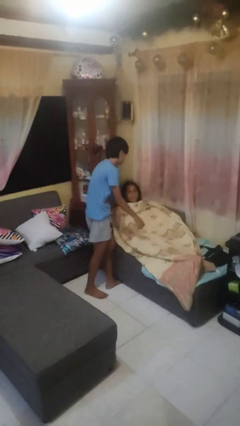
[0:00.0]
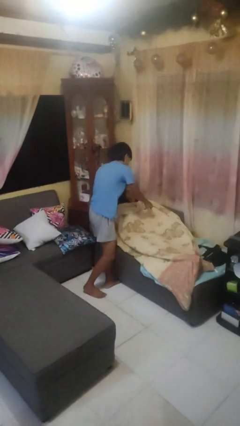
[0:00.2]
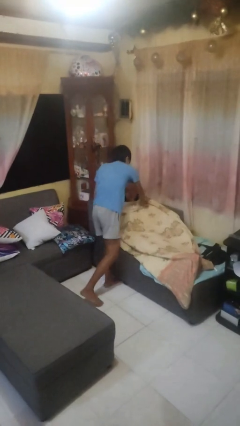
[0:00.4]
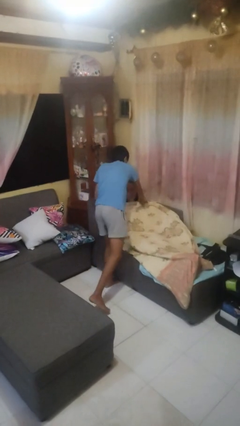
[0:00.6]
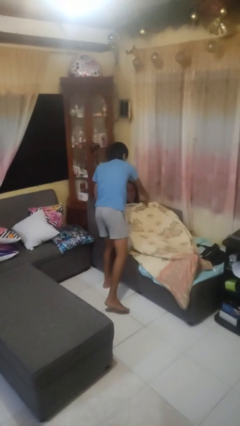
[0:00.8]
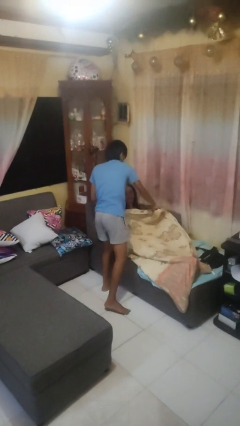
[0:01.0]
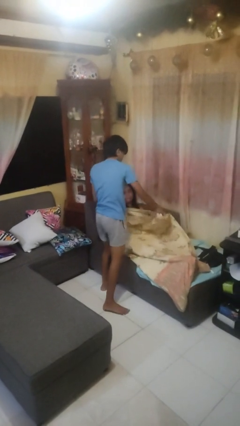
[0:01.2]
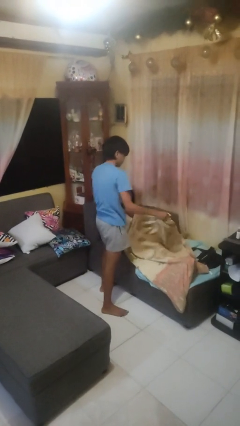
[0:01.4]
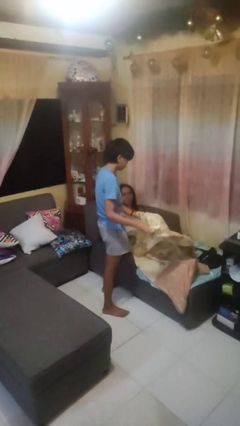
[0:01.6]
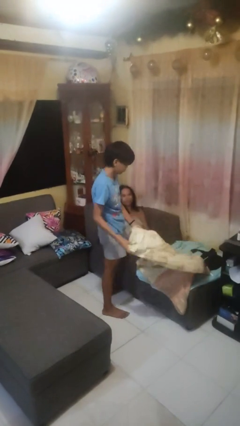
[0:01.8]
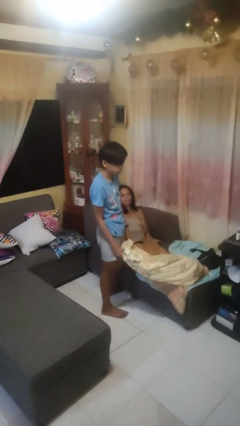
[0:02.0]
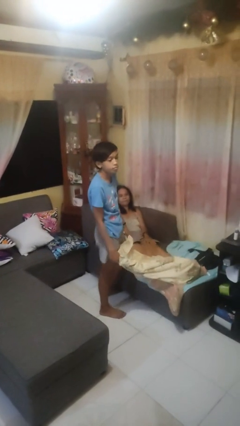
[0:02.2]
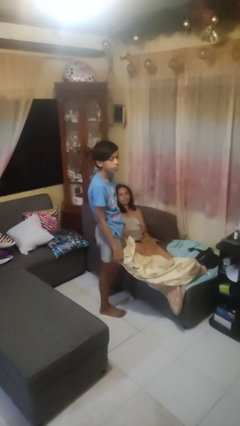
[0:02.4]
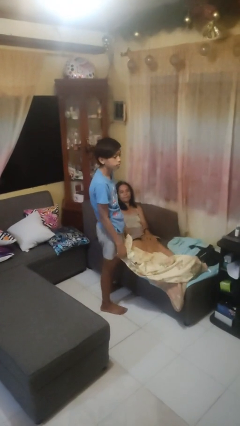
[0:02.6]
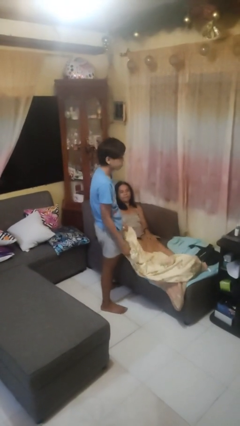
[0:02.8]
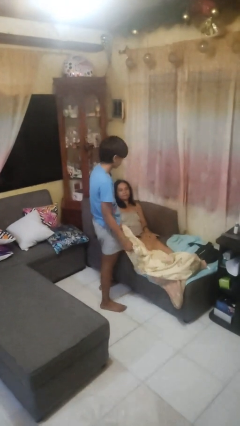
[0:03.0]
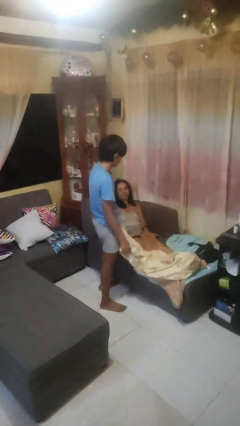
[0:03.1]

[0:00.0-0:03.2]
person uncovers friend with blanket

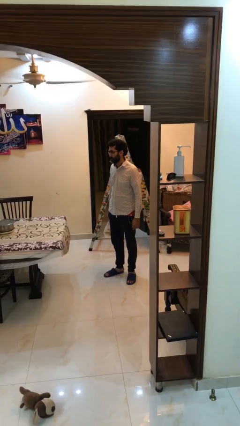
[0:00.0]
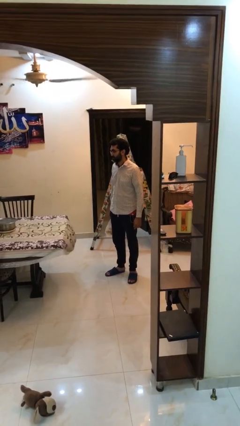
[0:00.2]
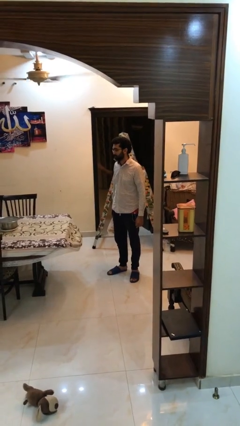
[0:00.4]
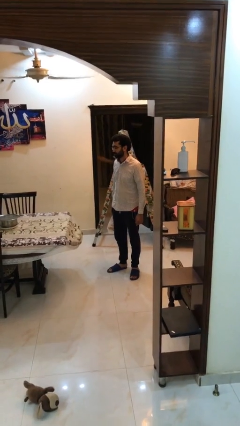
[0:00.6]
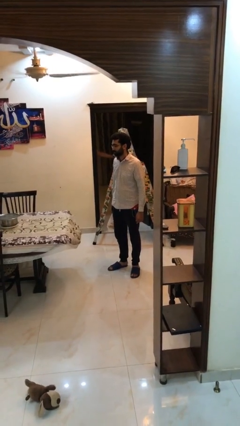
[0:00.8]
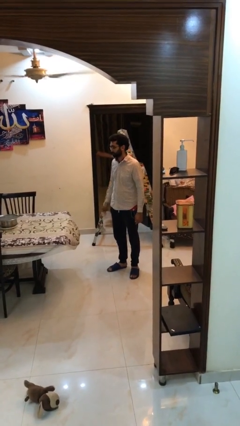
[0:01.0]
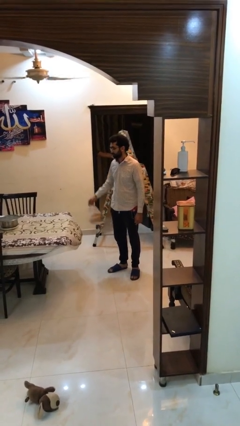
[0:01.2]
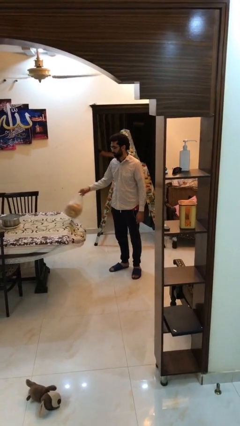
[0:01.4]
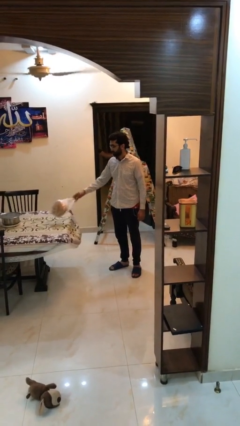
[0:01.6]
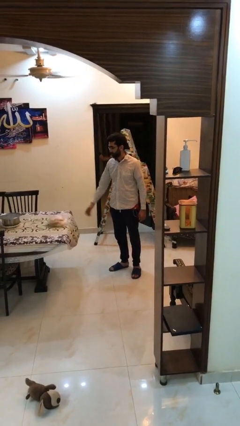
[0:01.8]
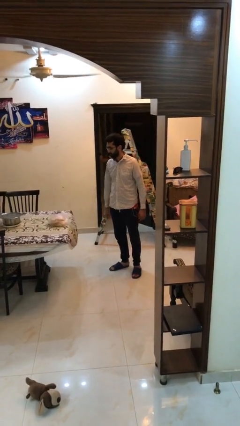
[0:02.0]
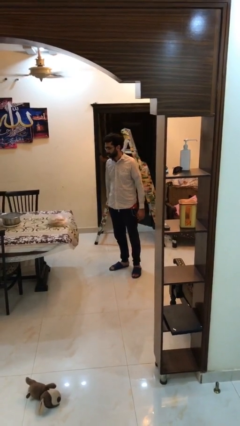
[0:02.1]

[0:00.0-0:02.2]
person puts down object on table

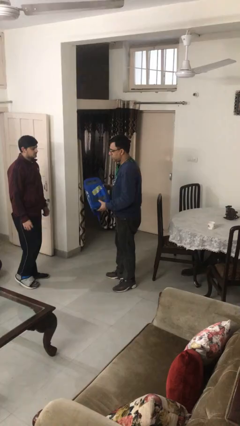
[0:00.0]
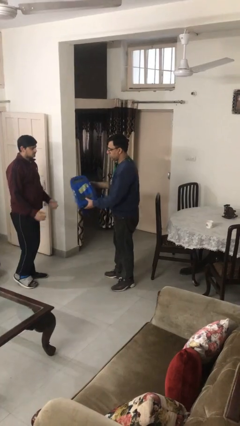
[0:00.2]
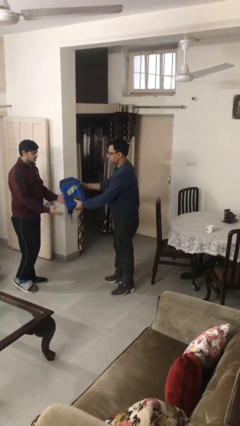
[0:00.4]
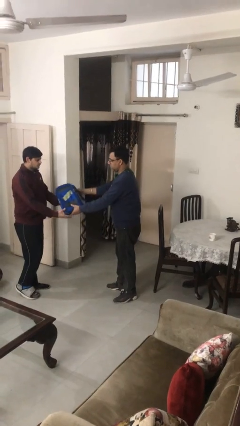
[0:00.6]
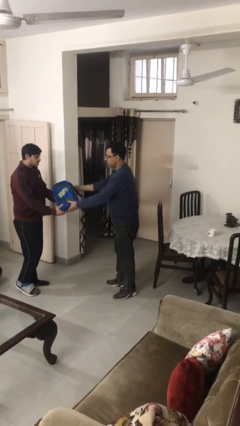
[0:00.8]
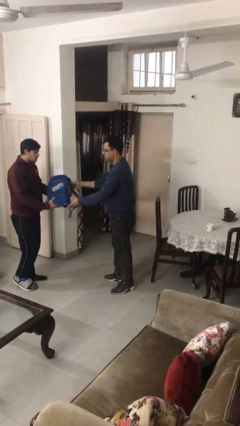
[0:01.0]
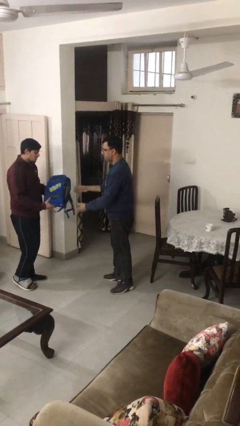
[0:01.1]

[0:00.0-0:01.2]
person transfers object to person

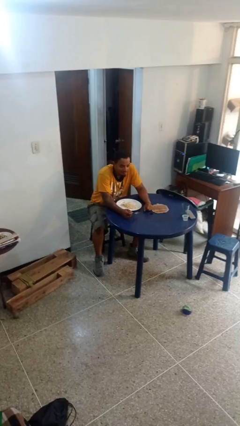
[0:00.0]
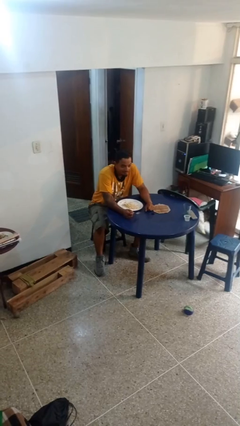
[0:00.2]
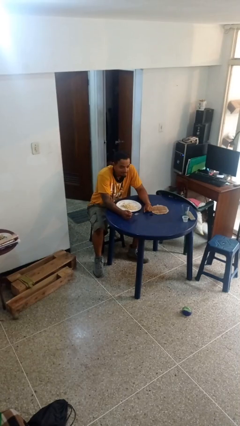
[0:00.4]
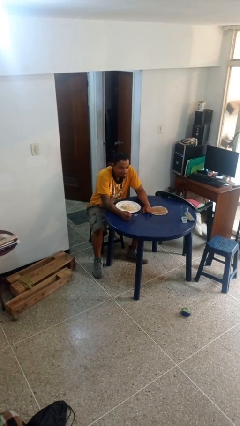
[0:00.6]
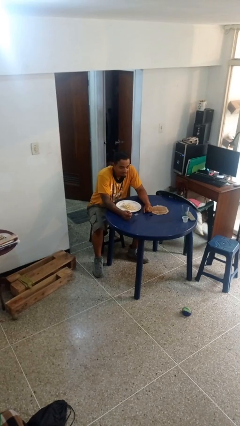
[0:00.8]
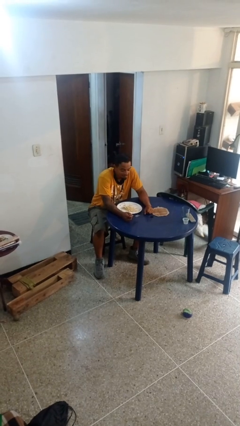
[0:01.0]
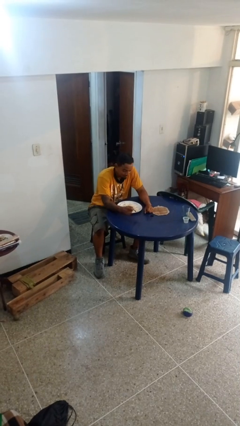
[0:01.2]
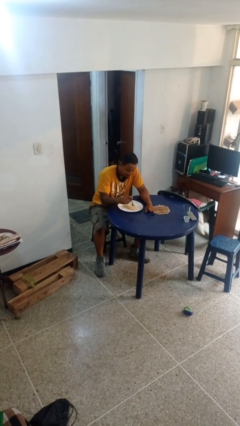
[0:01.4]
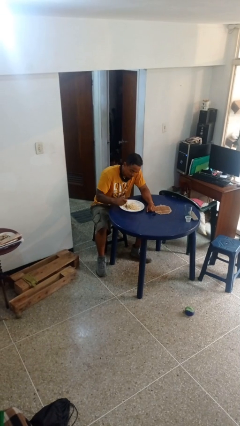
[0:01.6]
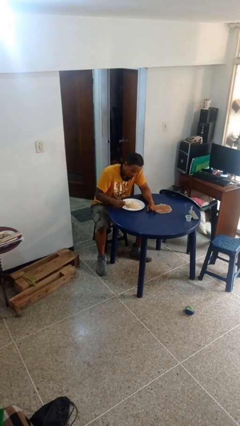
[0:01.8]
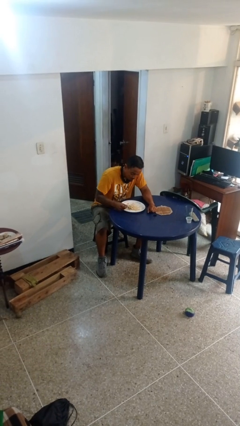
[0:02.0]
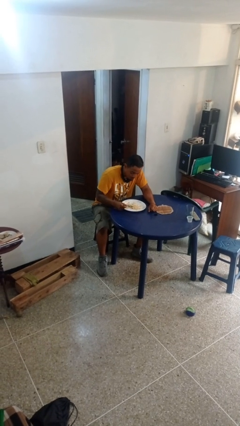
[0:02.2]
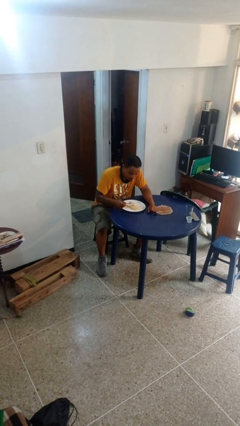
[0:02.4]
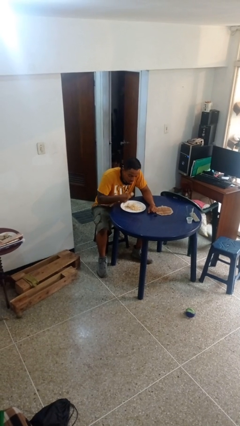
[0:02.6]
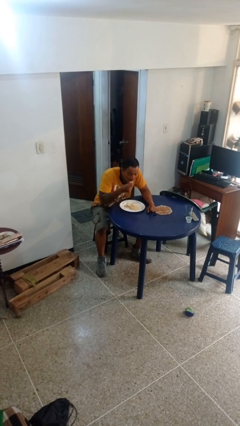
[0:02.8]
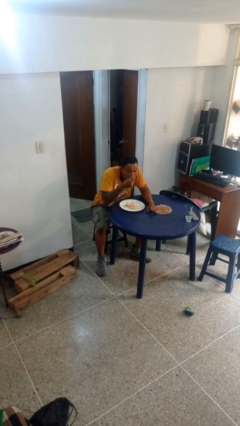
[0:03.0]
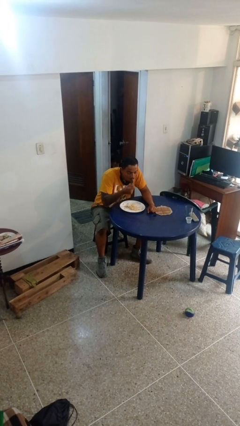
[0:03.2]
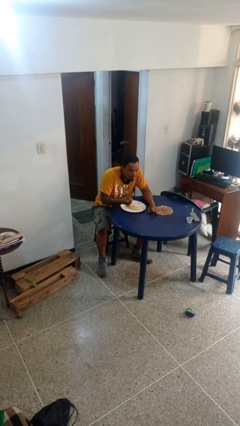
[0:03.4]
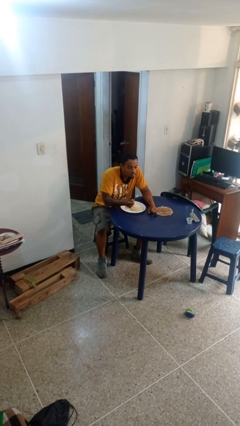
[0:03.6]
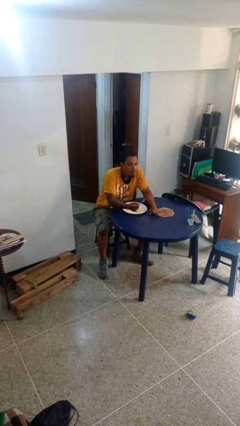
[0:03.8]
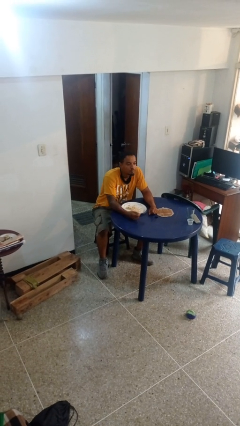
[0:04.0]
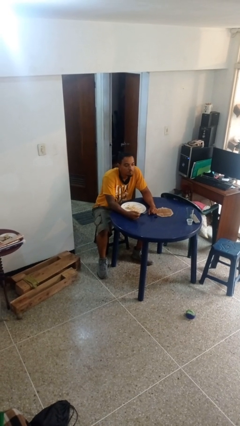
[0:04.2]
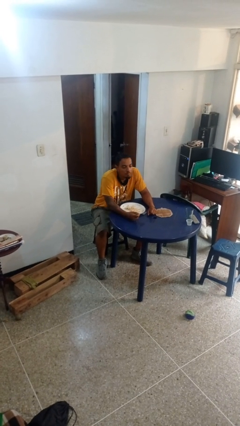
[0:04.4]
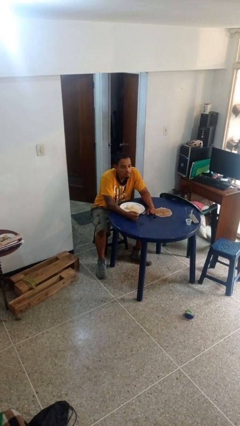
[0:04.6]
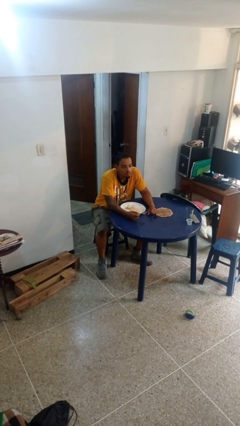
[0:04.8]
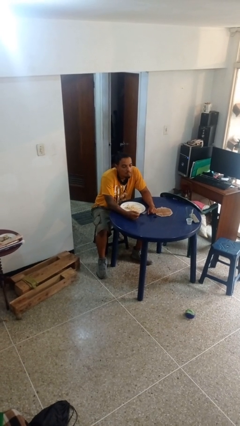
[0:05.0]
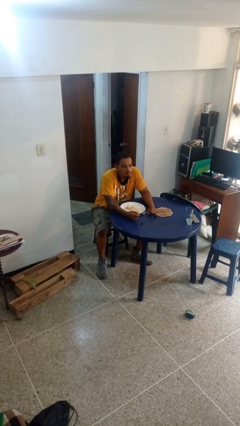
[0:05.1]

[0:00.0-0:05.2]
person eats with utensil

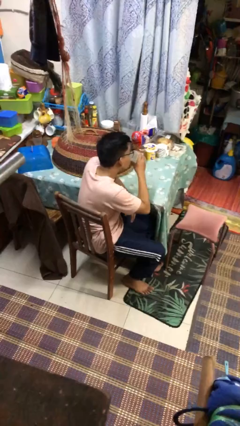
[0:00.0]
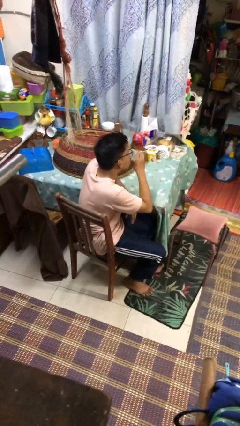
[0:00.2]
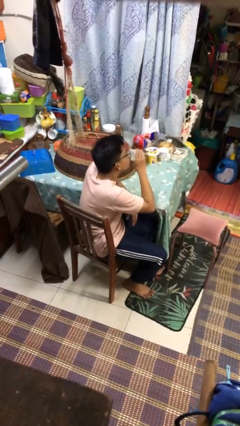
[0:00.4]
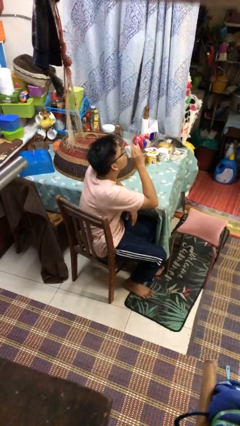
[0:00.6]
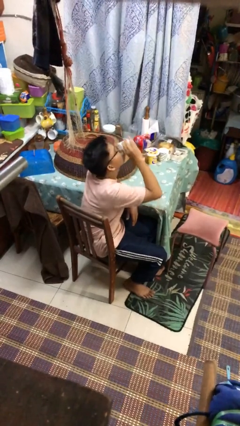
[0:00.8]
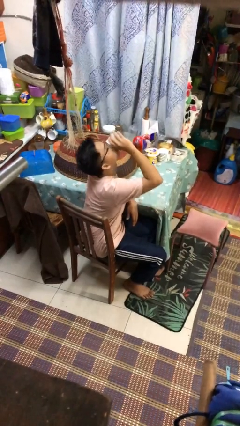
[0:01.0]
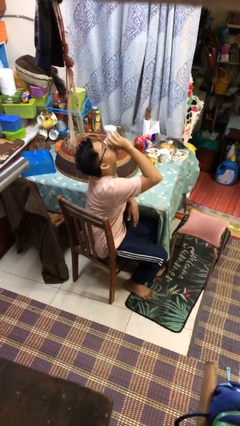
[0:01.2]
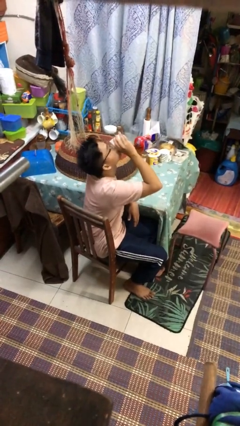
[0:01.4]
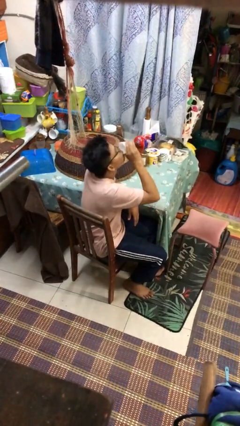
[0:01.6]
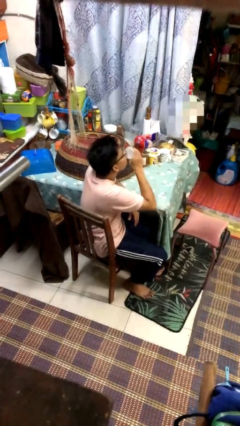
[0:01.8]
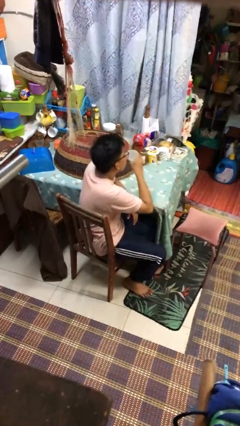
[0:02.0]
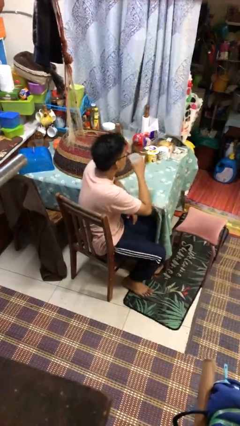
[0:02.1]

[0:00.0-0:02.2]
person drinks from shotglass

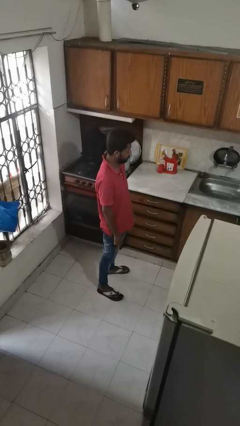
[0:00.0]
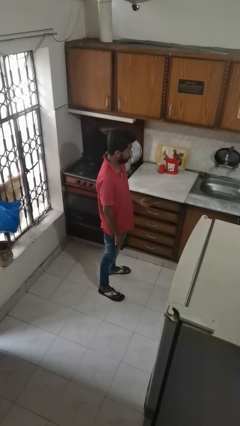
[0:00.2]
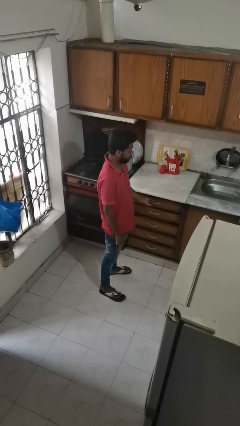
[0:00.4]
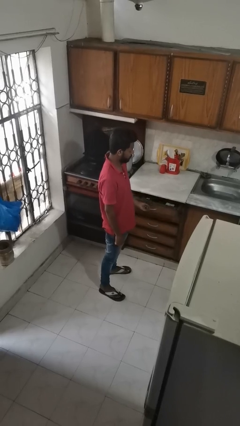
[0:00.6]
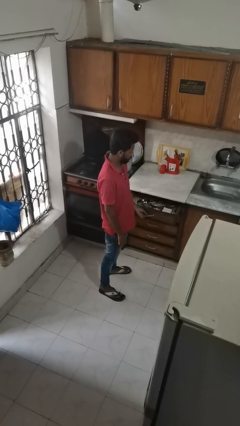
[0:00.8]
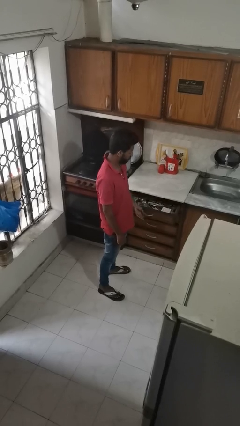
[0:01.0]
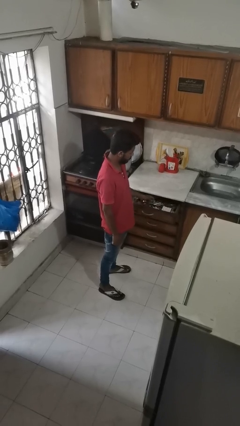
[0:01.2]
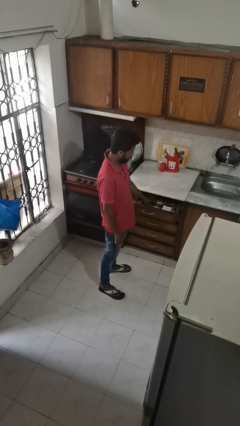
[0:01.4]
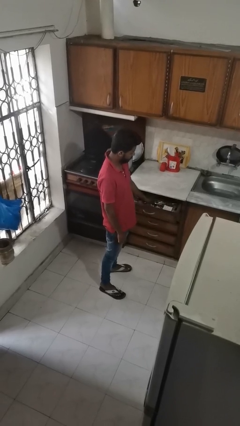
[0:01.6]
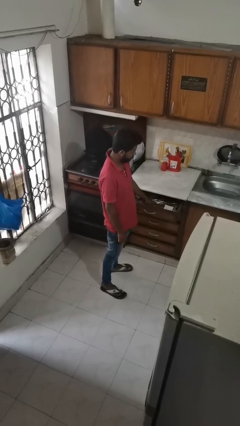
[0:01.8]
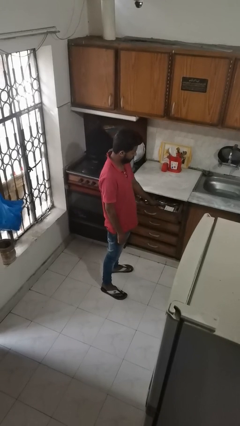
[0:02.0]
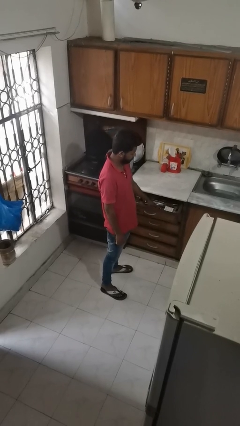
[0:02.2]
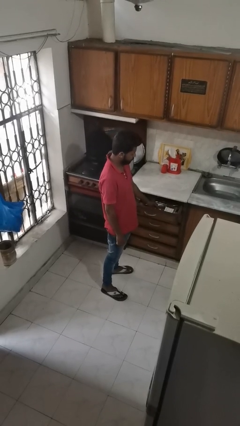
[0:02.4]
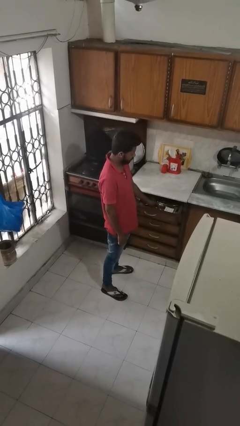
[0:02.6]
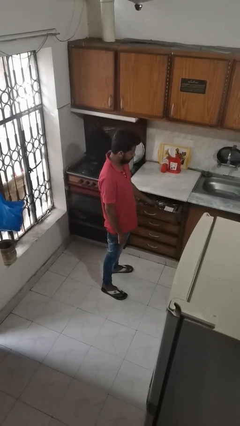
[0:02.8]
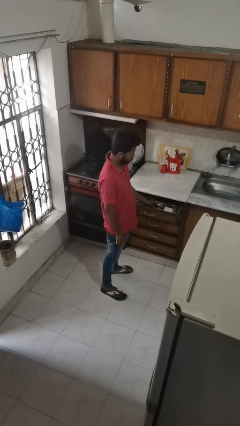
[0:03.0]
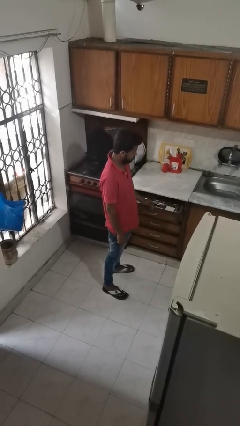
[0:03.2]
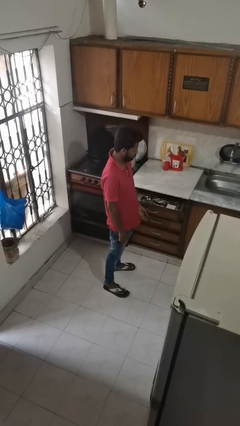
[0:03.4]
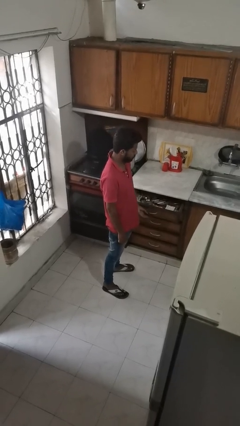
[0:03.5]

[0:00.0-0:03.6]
person searches in kitchen drawer
